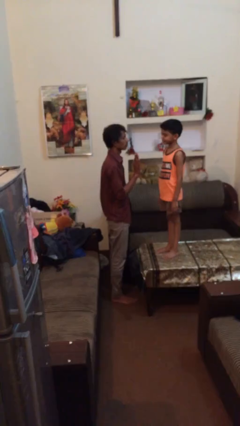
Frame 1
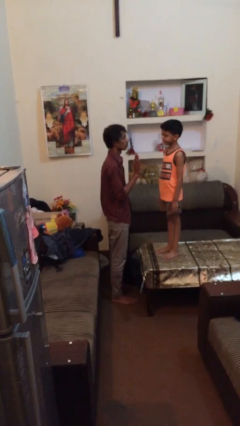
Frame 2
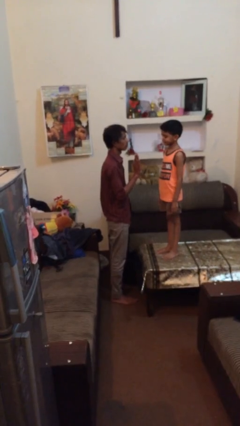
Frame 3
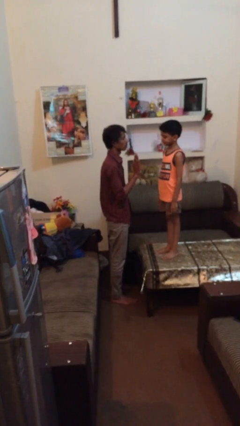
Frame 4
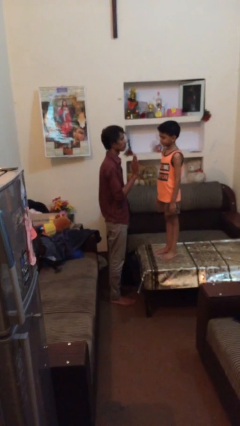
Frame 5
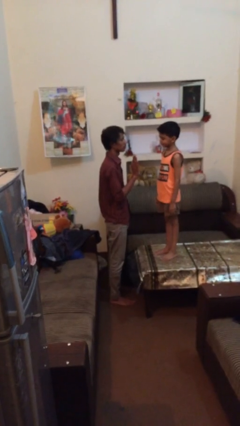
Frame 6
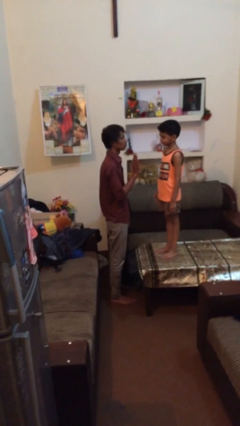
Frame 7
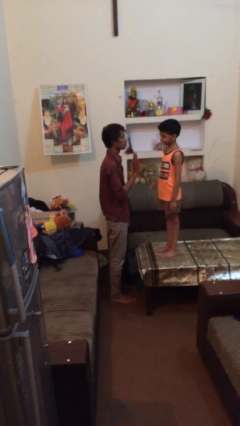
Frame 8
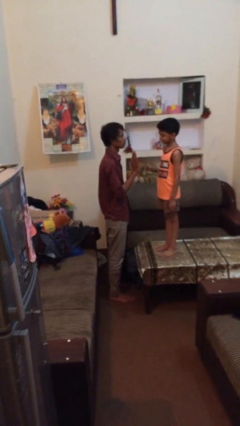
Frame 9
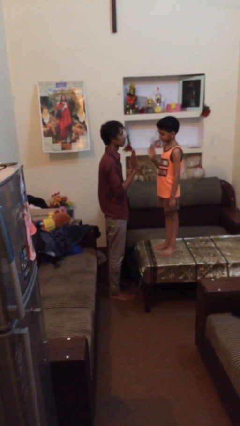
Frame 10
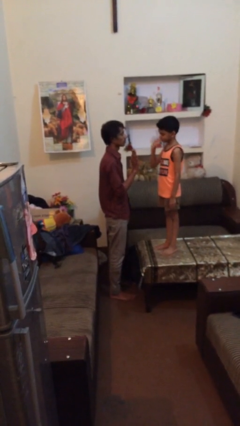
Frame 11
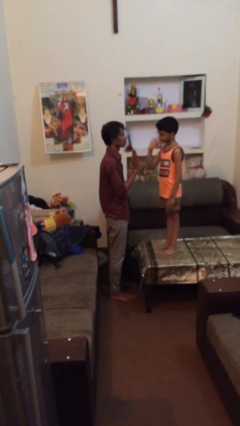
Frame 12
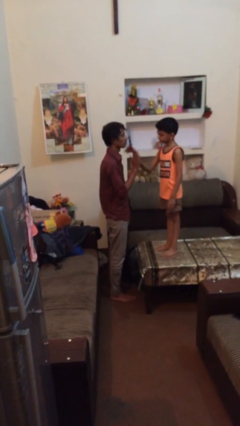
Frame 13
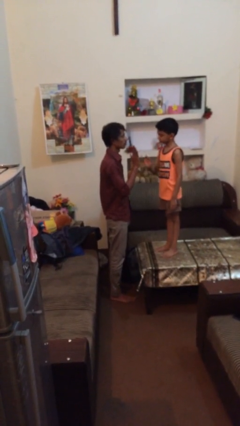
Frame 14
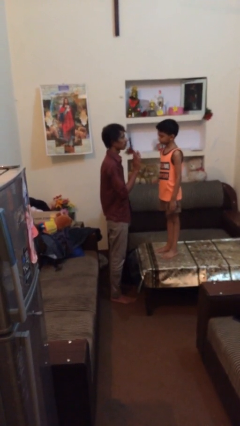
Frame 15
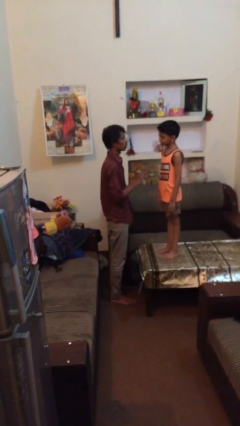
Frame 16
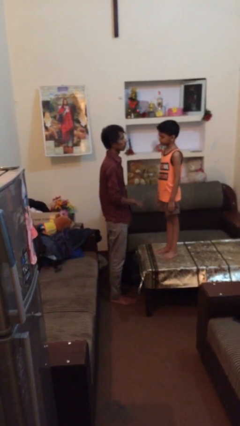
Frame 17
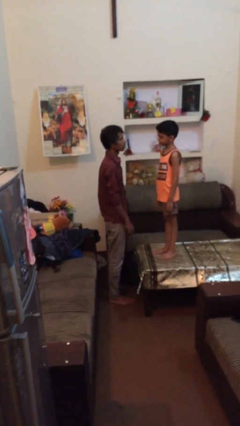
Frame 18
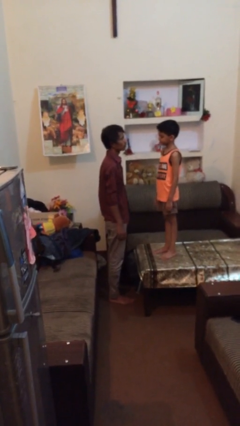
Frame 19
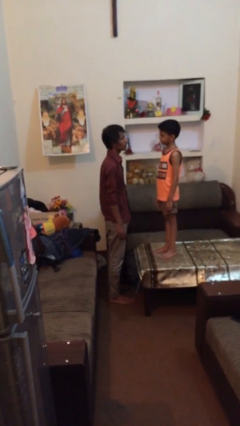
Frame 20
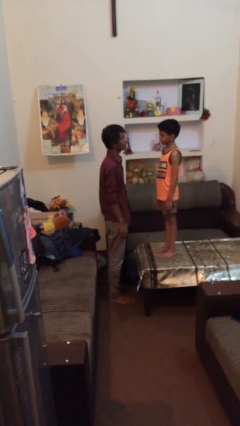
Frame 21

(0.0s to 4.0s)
person highfives hand

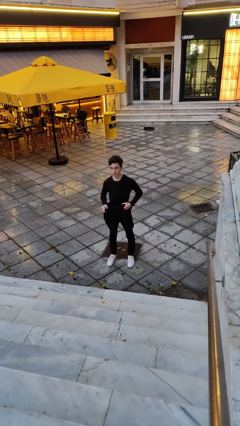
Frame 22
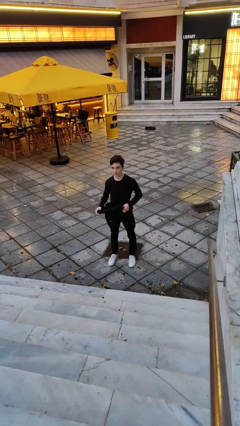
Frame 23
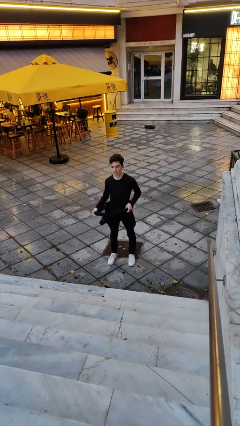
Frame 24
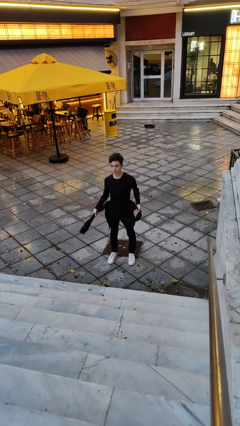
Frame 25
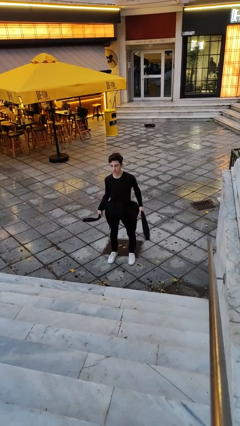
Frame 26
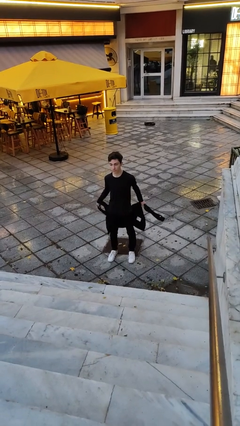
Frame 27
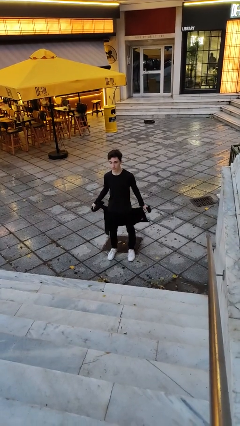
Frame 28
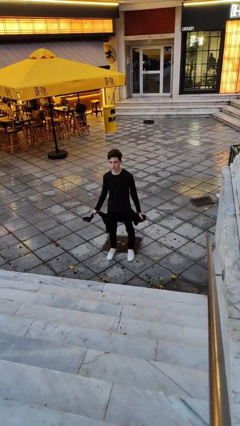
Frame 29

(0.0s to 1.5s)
person unties jacket around waist

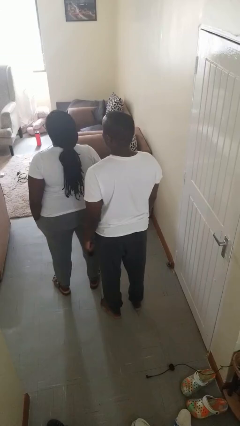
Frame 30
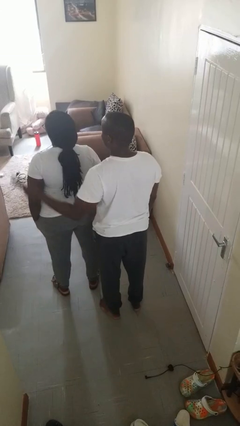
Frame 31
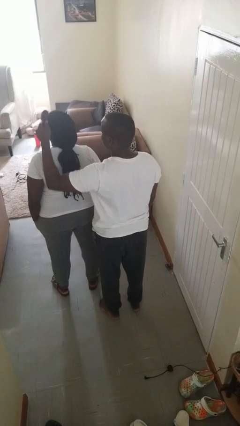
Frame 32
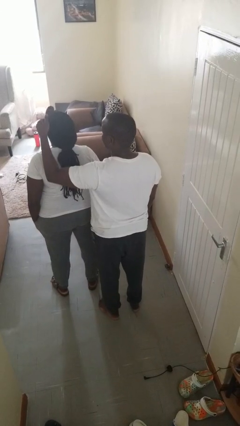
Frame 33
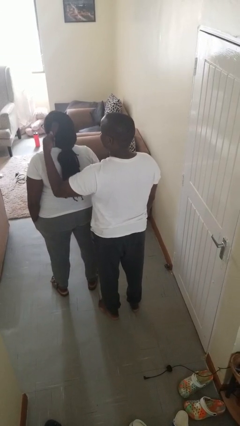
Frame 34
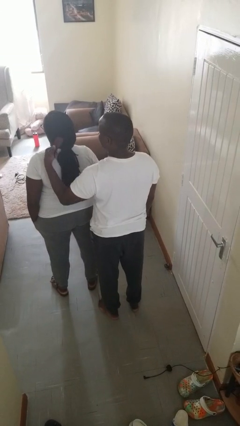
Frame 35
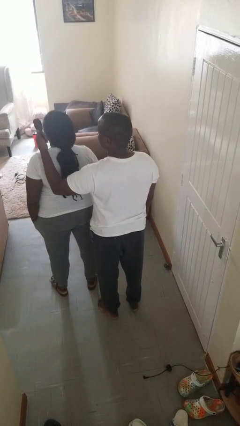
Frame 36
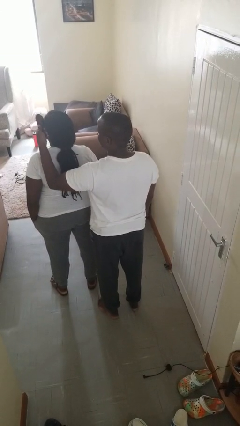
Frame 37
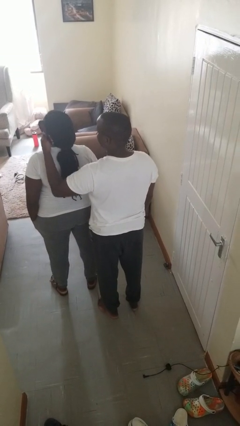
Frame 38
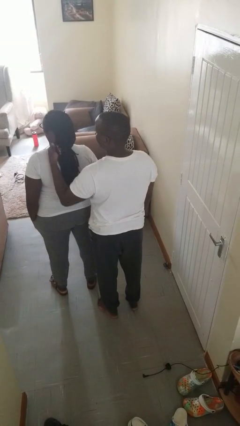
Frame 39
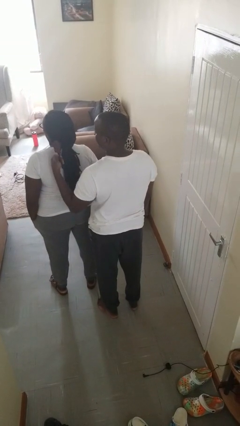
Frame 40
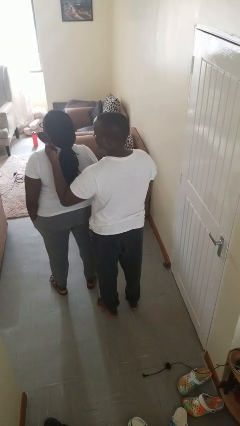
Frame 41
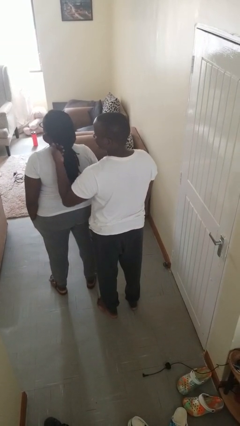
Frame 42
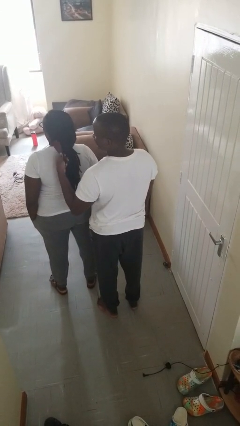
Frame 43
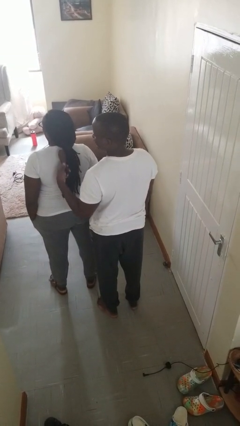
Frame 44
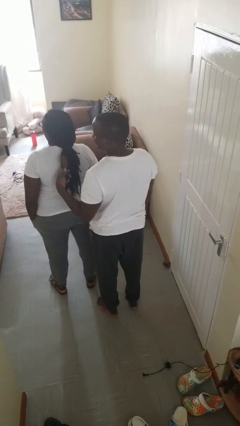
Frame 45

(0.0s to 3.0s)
person brushes hair of person

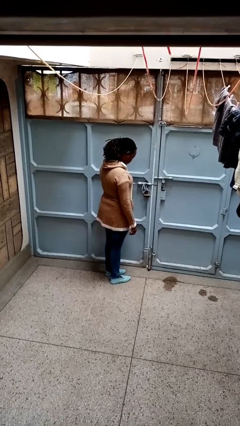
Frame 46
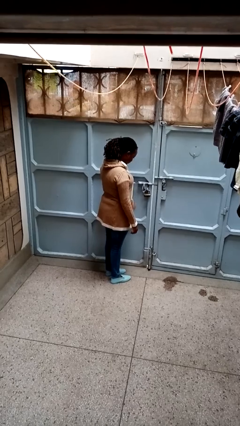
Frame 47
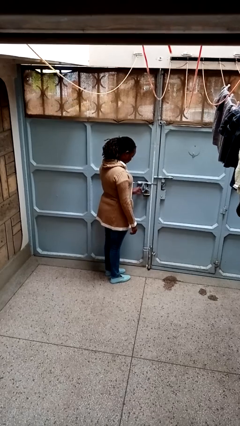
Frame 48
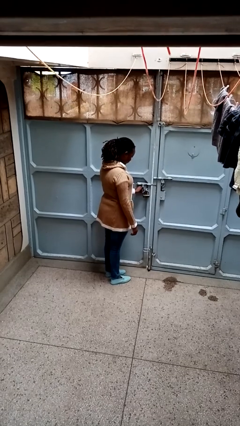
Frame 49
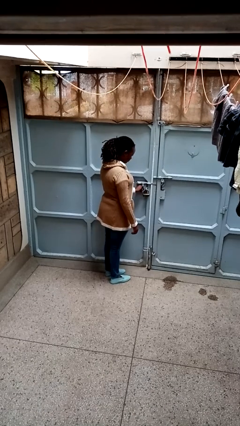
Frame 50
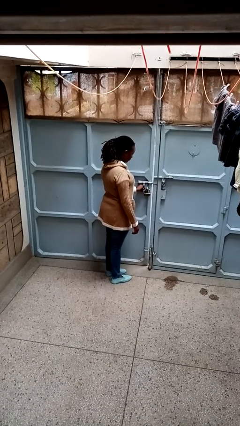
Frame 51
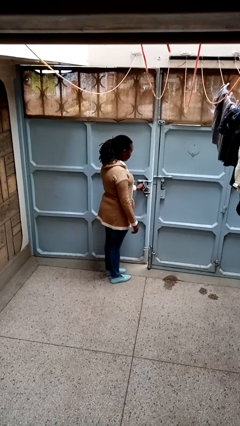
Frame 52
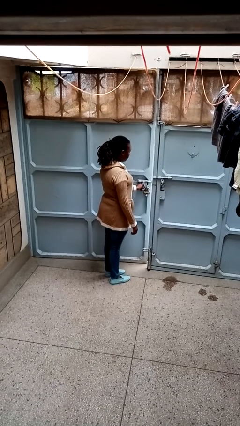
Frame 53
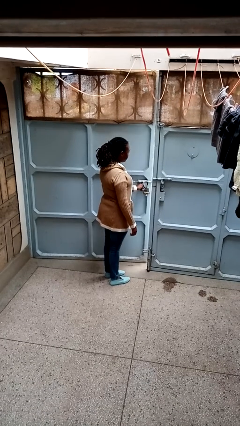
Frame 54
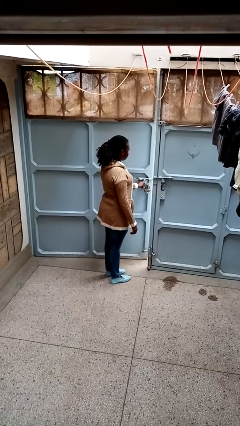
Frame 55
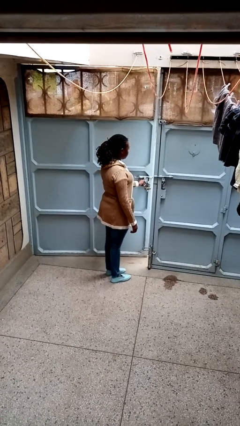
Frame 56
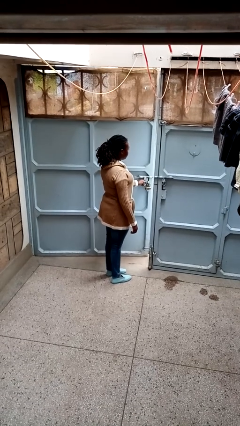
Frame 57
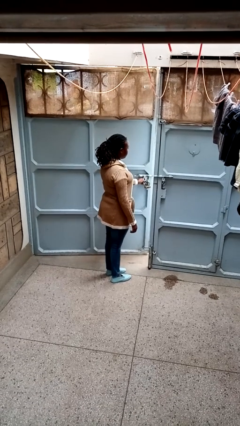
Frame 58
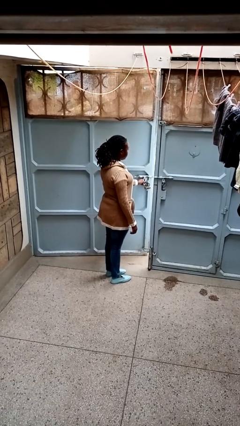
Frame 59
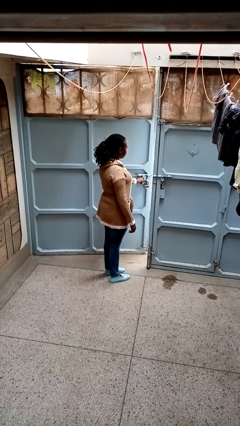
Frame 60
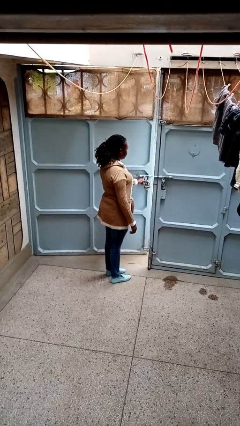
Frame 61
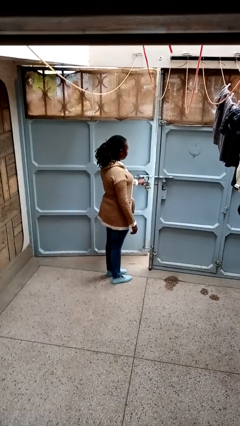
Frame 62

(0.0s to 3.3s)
person opens gate

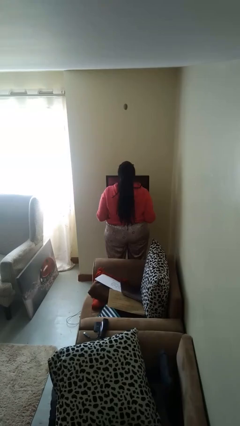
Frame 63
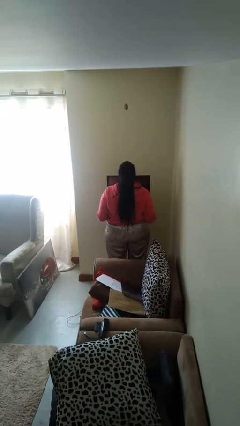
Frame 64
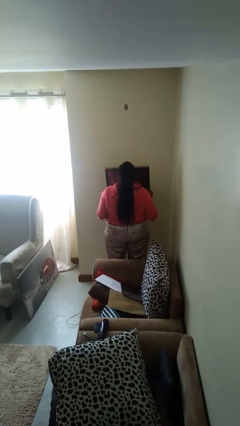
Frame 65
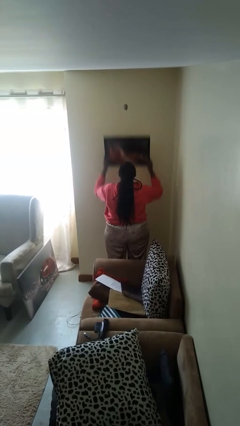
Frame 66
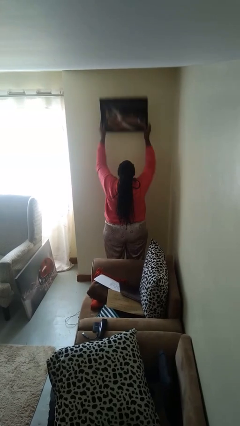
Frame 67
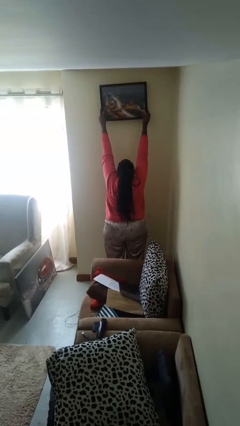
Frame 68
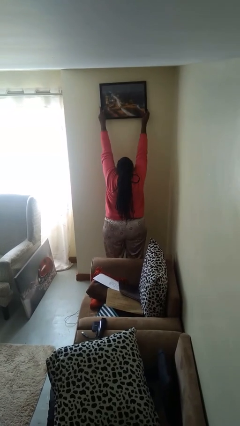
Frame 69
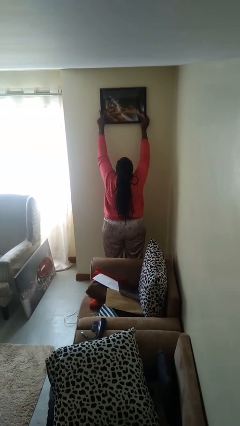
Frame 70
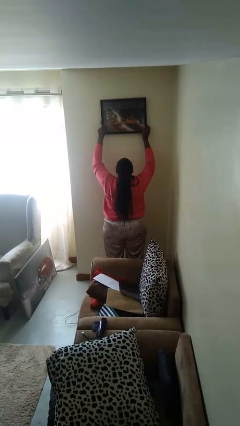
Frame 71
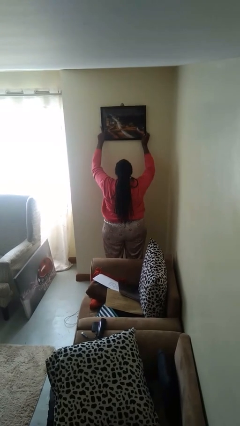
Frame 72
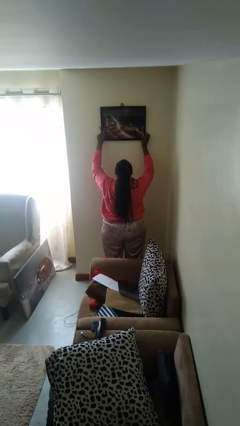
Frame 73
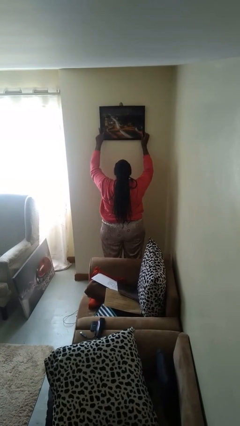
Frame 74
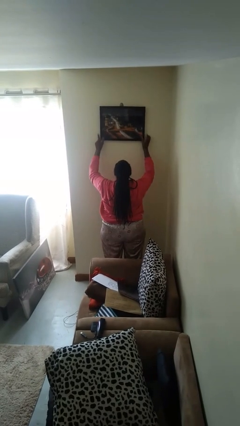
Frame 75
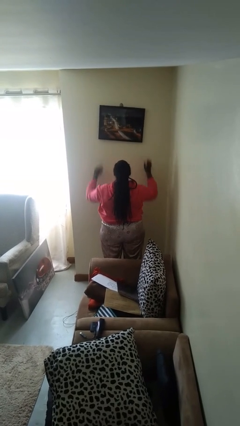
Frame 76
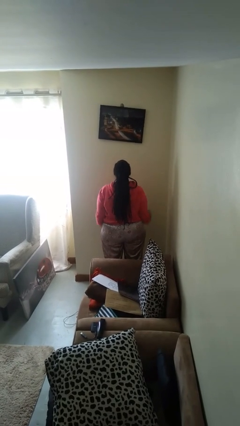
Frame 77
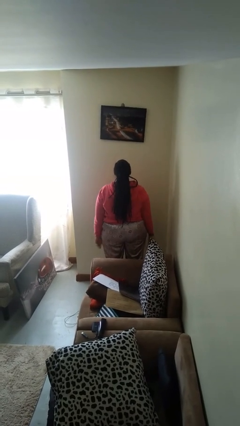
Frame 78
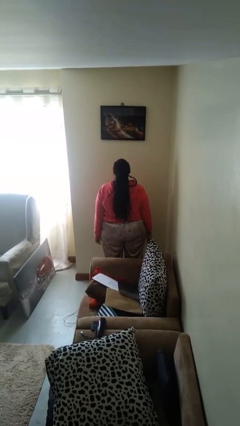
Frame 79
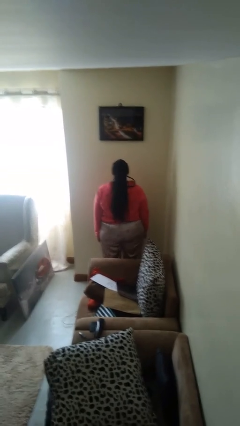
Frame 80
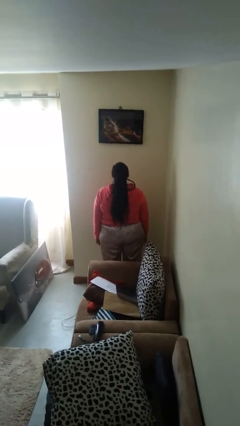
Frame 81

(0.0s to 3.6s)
person puts up picture frame

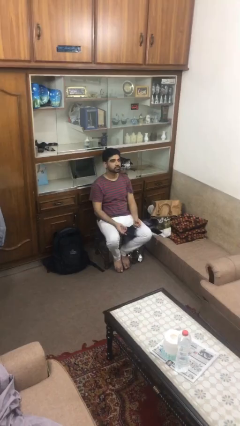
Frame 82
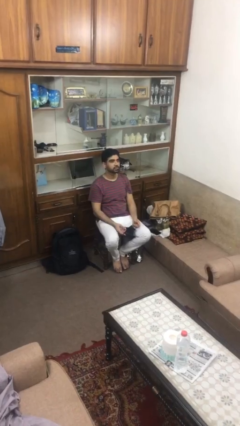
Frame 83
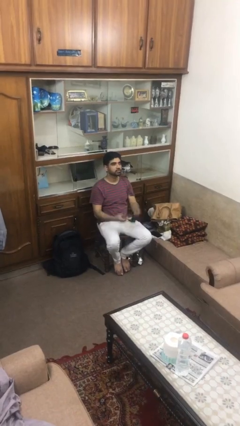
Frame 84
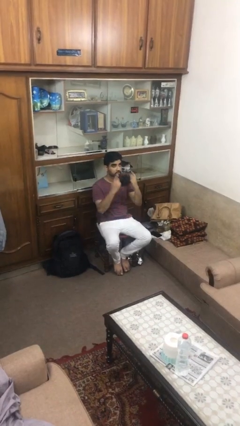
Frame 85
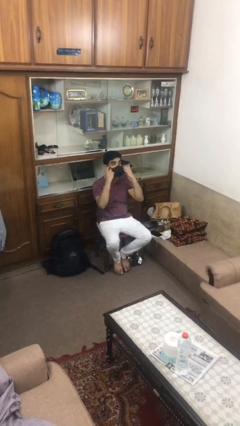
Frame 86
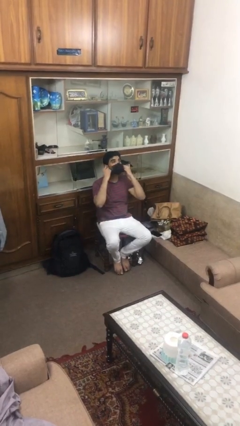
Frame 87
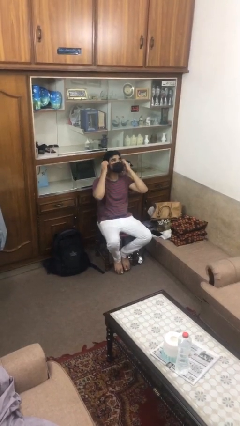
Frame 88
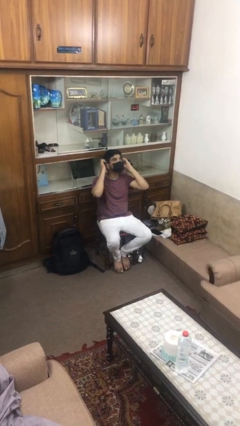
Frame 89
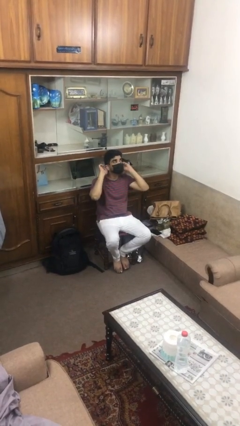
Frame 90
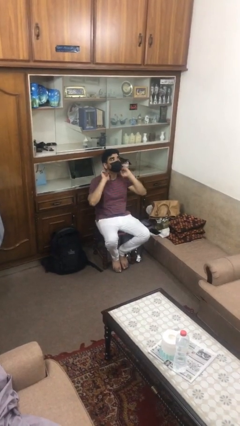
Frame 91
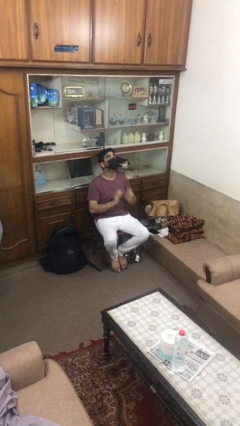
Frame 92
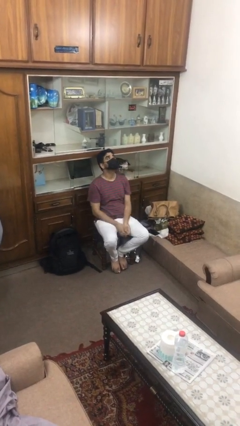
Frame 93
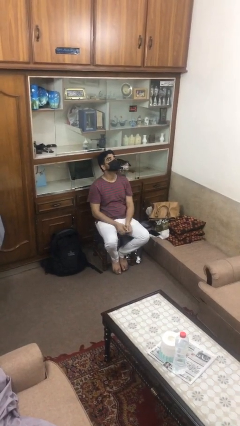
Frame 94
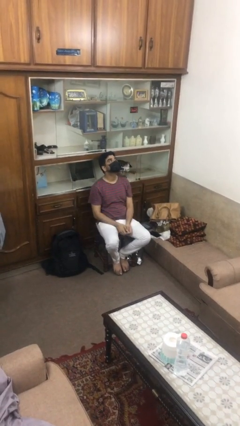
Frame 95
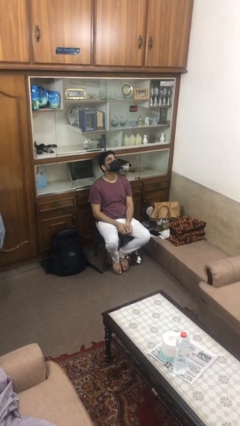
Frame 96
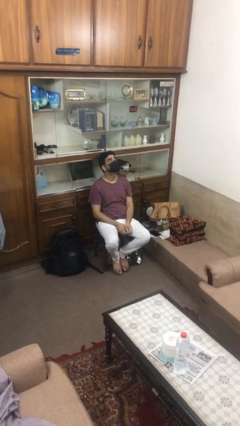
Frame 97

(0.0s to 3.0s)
person puts on facemask
